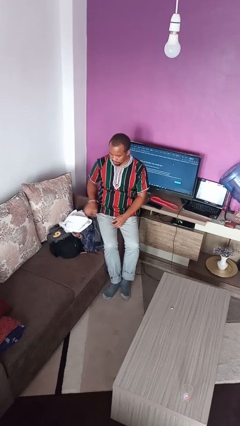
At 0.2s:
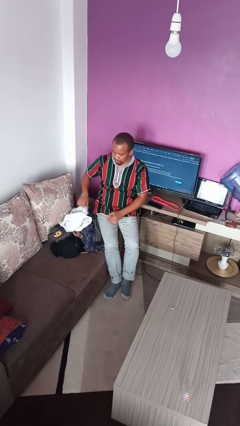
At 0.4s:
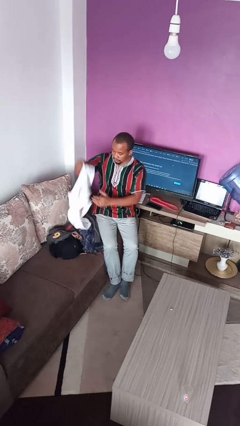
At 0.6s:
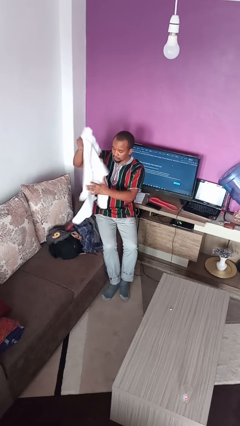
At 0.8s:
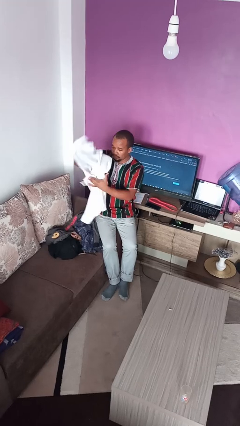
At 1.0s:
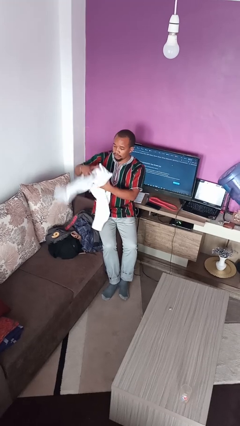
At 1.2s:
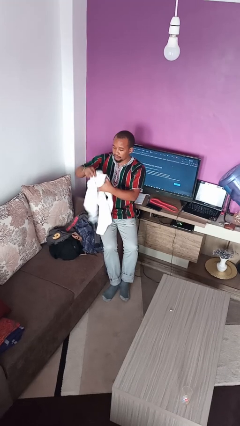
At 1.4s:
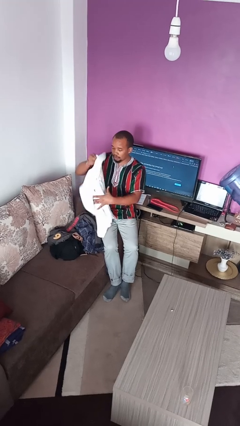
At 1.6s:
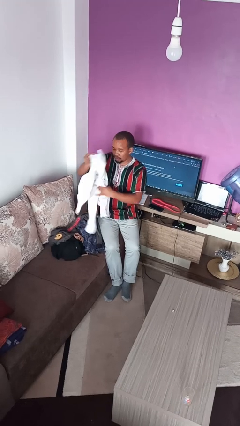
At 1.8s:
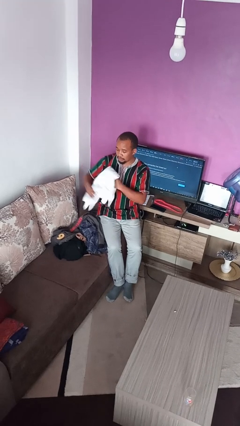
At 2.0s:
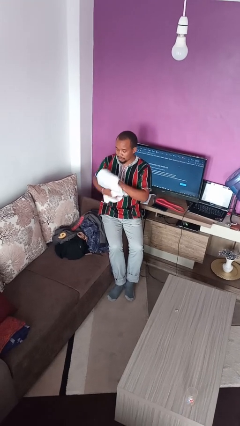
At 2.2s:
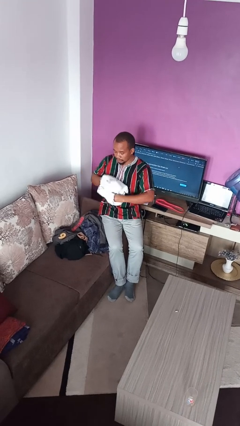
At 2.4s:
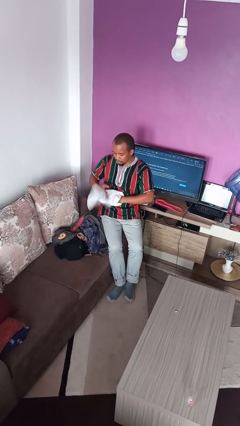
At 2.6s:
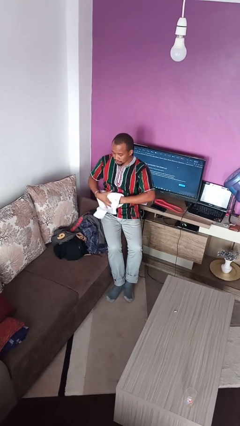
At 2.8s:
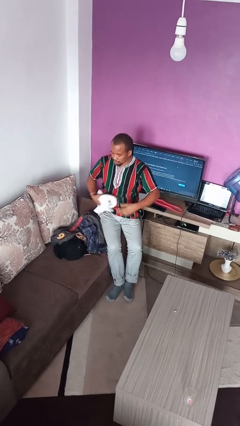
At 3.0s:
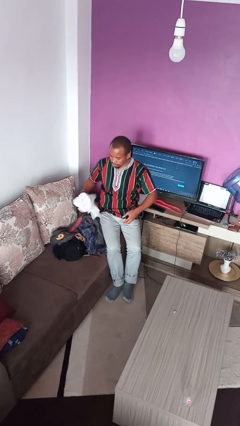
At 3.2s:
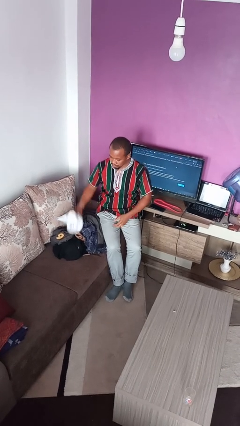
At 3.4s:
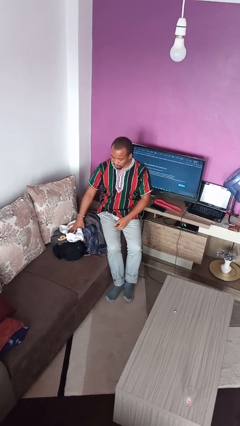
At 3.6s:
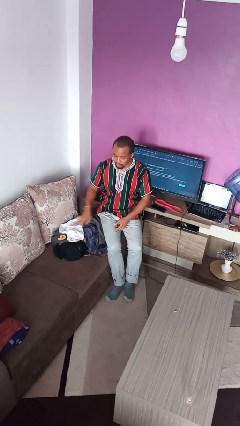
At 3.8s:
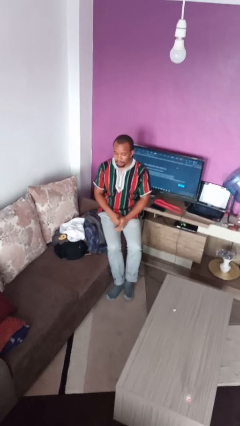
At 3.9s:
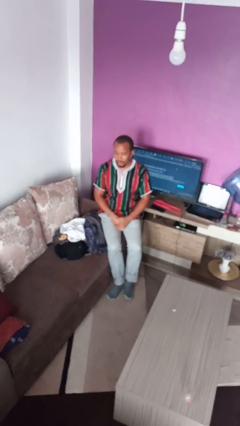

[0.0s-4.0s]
person folds shirt

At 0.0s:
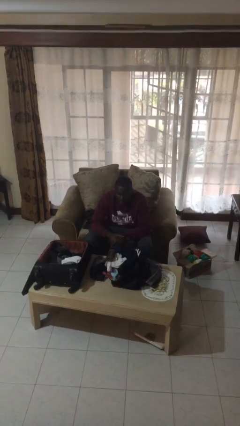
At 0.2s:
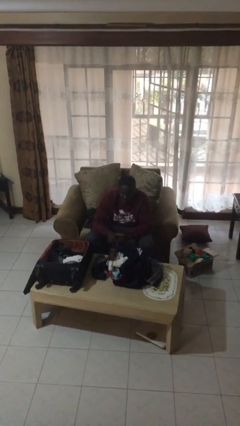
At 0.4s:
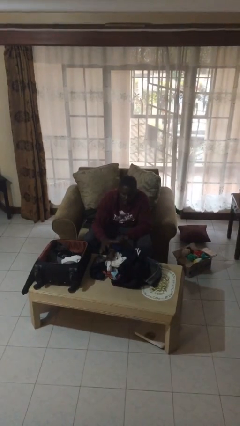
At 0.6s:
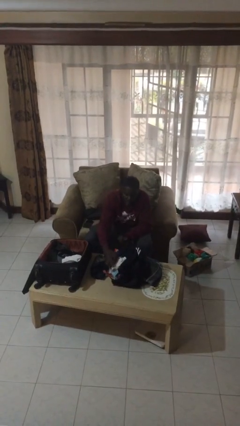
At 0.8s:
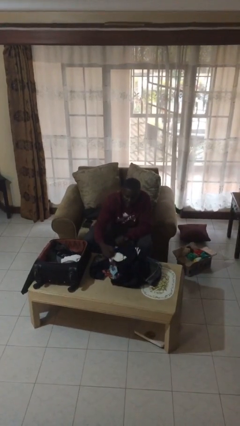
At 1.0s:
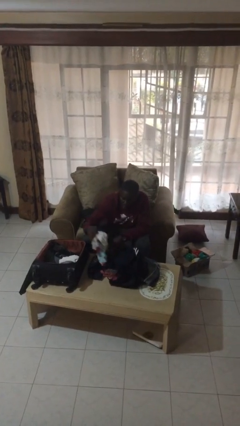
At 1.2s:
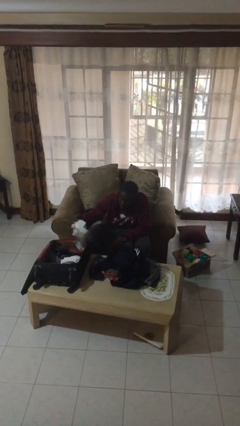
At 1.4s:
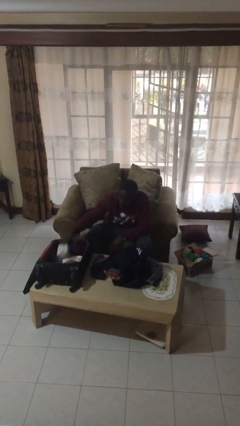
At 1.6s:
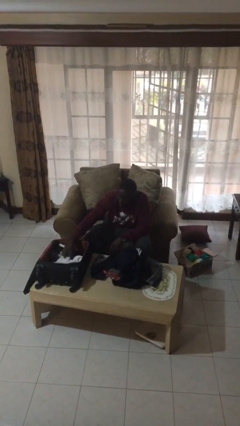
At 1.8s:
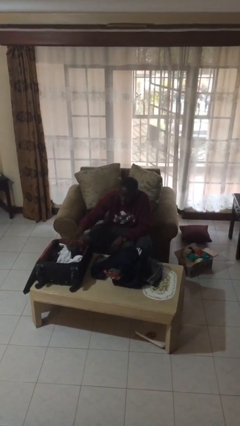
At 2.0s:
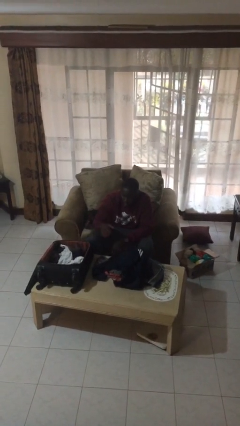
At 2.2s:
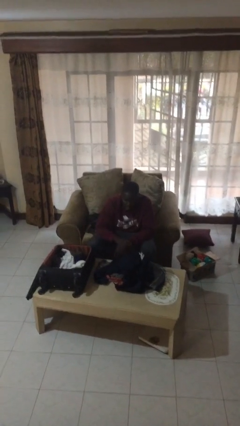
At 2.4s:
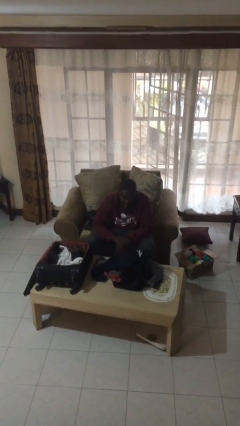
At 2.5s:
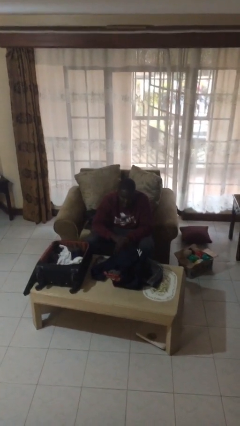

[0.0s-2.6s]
person loads clothes into suitcase

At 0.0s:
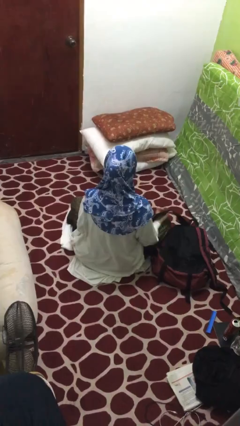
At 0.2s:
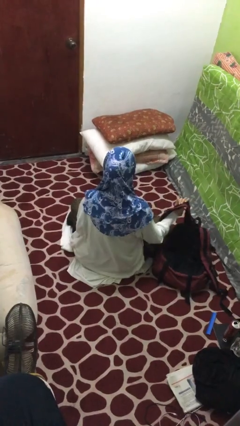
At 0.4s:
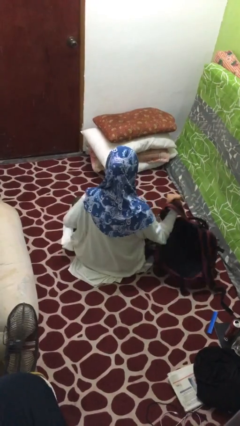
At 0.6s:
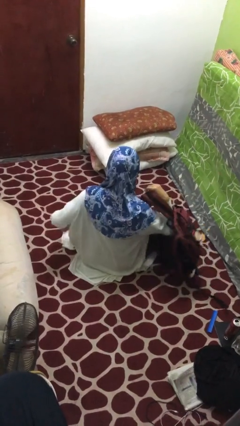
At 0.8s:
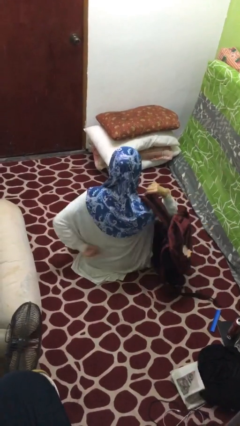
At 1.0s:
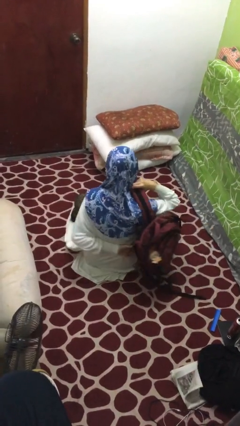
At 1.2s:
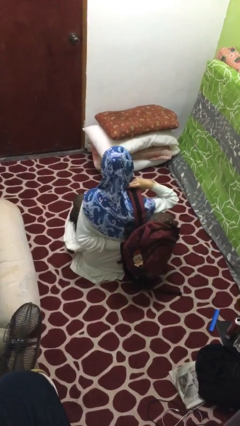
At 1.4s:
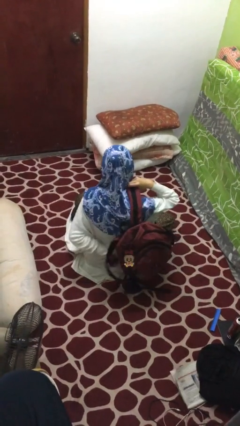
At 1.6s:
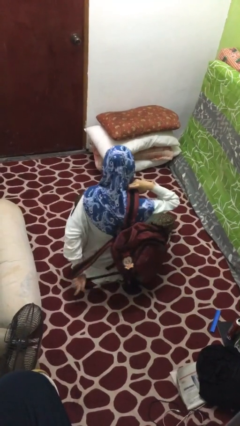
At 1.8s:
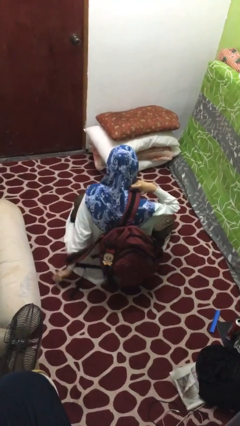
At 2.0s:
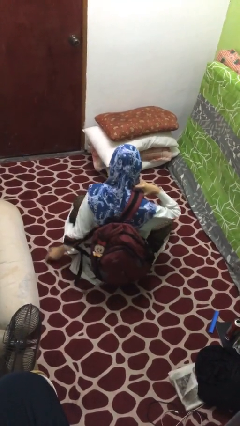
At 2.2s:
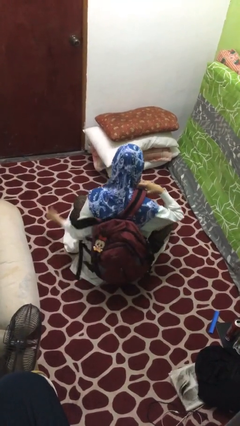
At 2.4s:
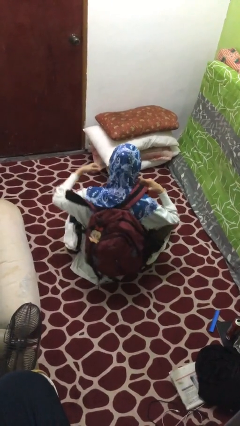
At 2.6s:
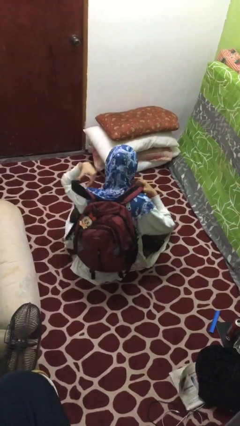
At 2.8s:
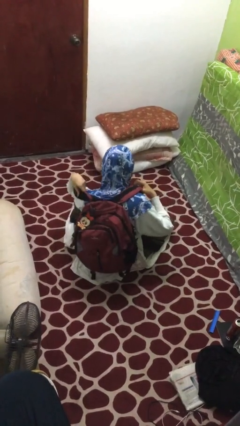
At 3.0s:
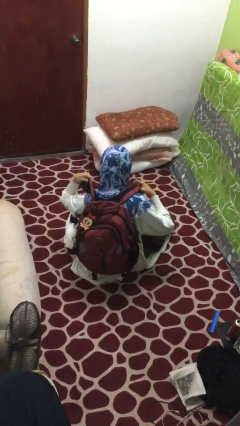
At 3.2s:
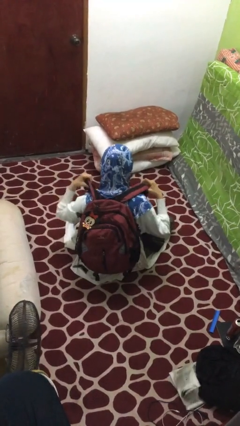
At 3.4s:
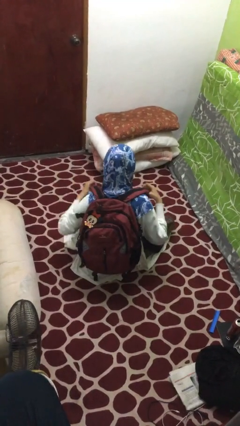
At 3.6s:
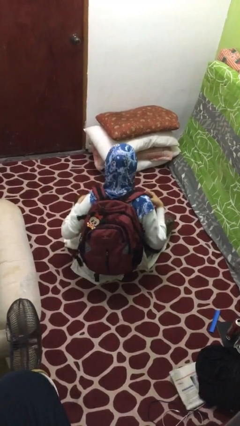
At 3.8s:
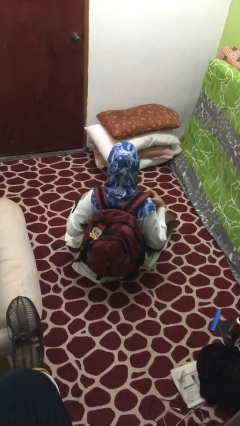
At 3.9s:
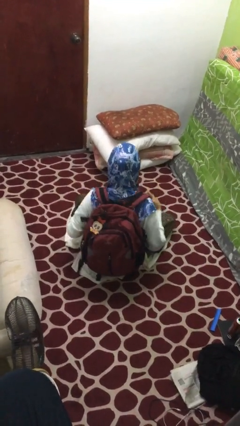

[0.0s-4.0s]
person puts on backpack

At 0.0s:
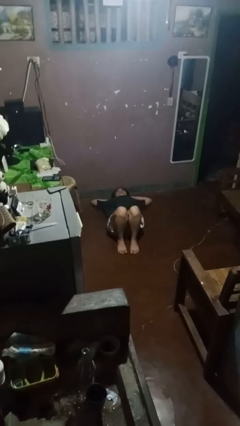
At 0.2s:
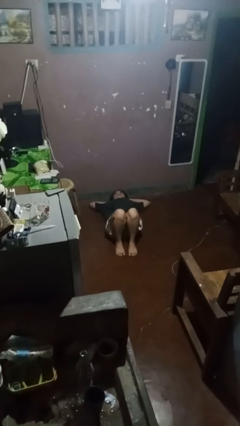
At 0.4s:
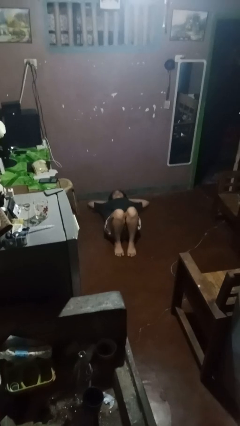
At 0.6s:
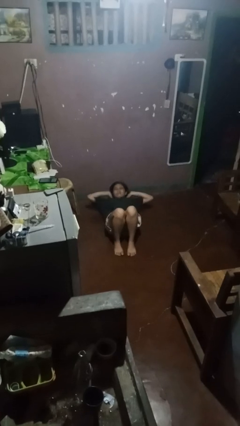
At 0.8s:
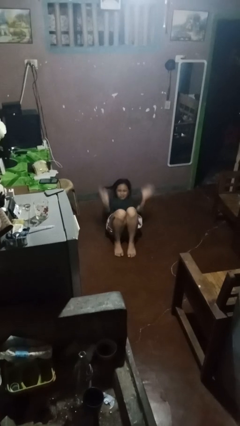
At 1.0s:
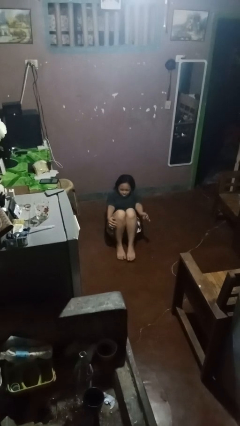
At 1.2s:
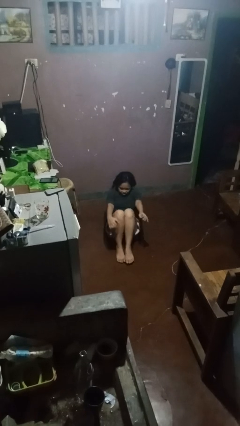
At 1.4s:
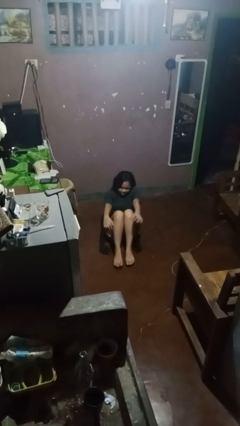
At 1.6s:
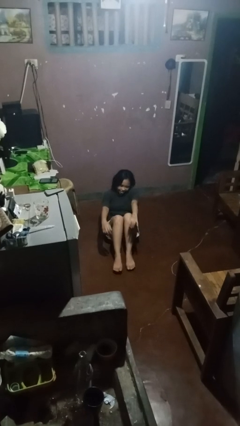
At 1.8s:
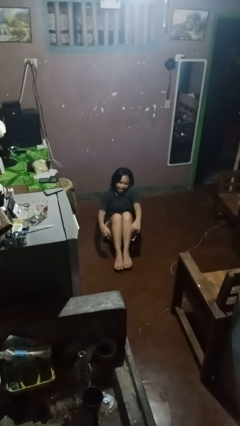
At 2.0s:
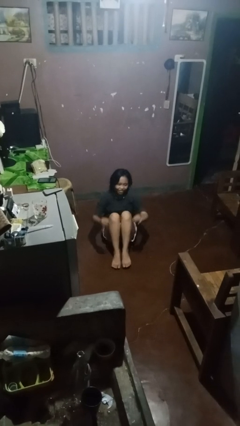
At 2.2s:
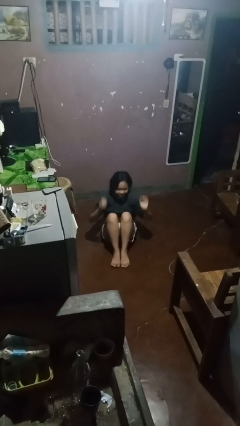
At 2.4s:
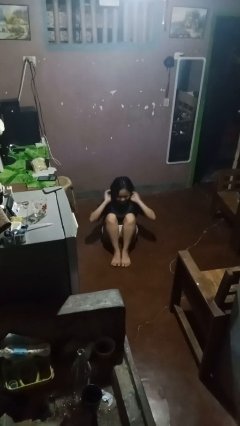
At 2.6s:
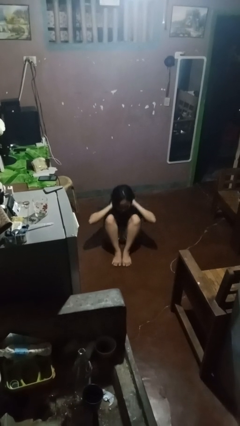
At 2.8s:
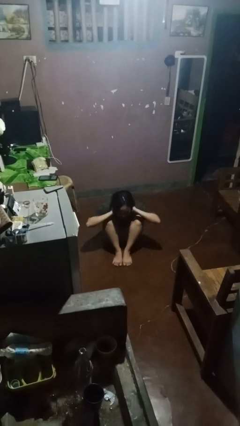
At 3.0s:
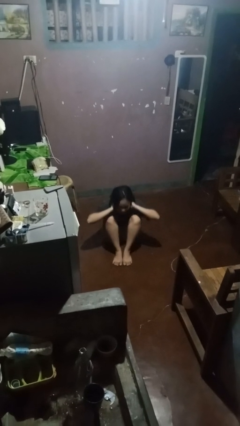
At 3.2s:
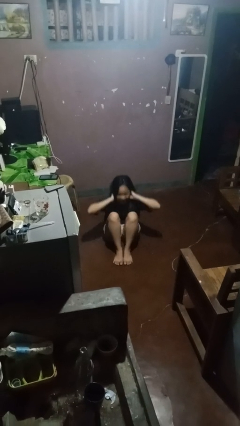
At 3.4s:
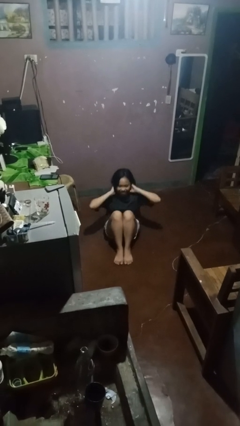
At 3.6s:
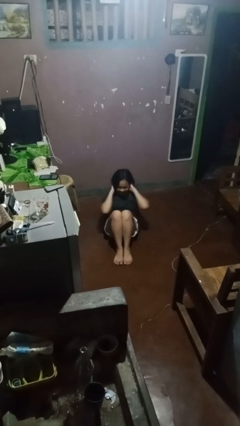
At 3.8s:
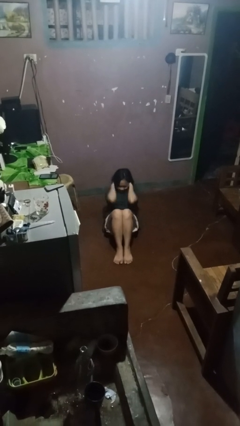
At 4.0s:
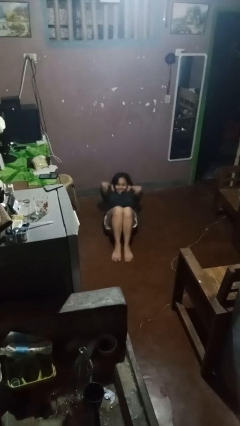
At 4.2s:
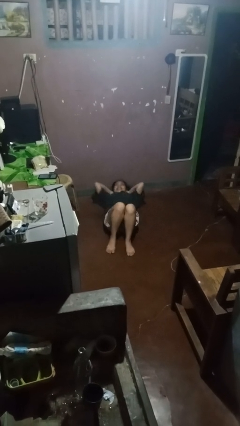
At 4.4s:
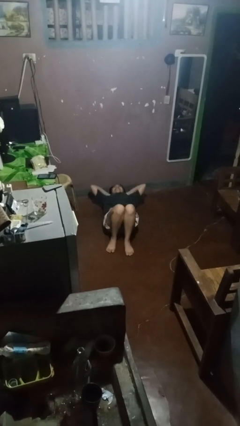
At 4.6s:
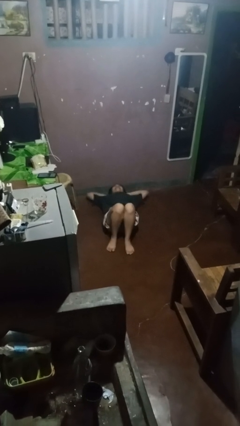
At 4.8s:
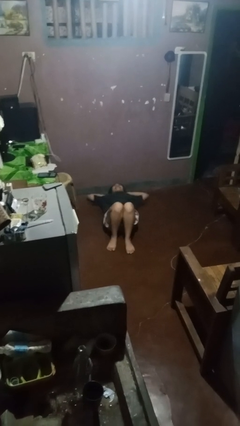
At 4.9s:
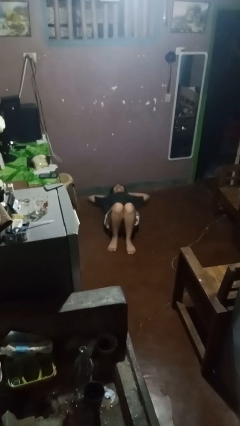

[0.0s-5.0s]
person exercises with situp

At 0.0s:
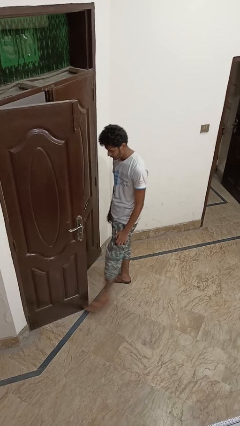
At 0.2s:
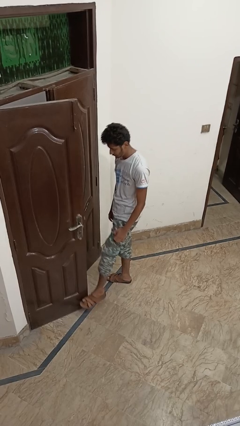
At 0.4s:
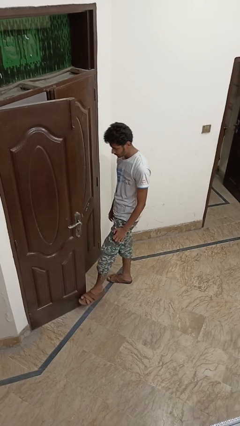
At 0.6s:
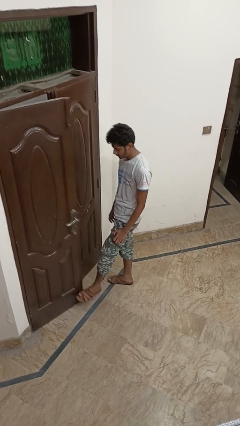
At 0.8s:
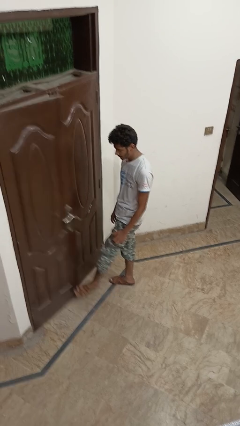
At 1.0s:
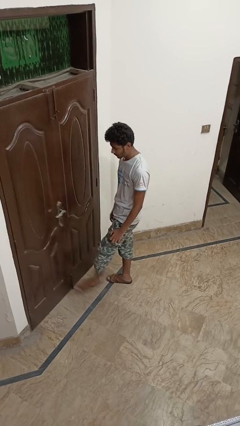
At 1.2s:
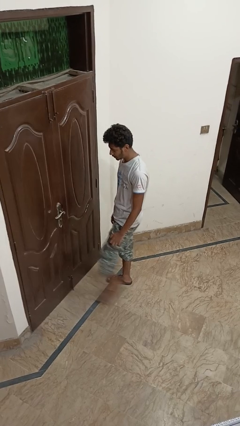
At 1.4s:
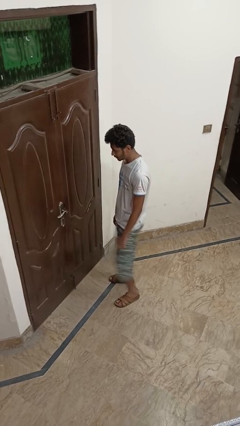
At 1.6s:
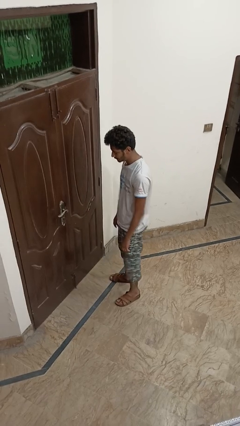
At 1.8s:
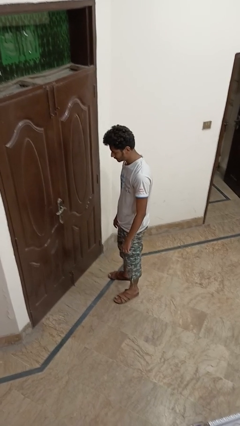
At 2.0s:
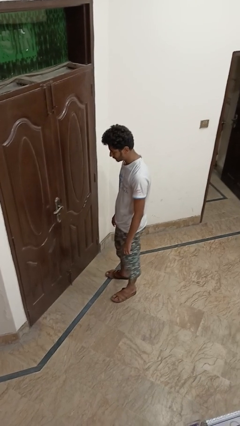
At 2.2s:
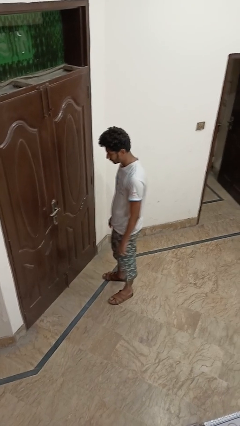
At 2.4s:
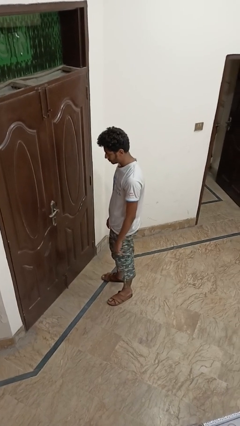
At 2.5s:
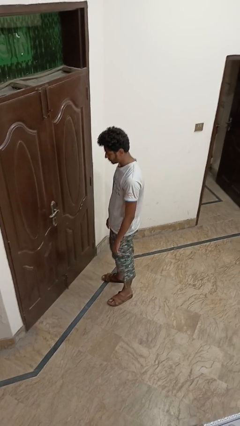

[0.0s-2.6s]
person closes door with foot
